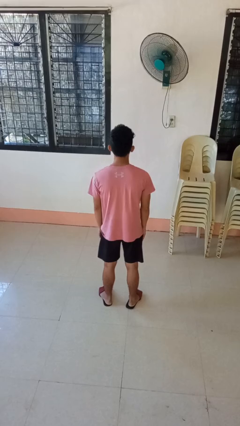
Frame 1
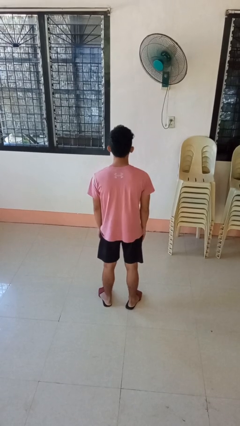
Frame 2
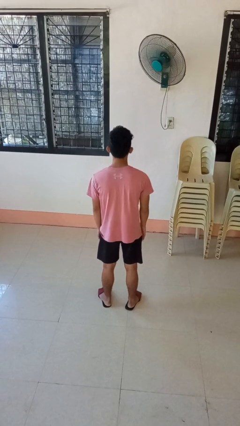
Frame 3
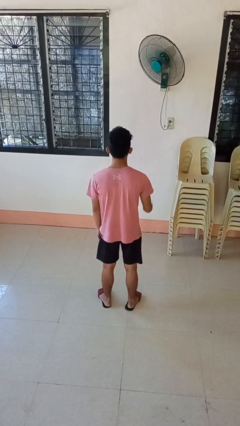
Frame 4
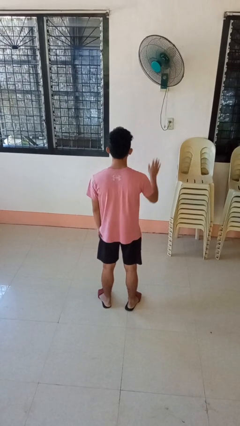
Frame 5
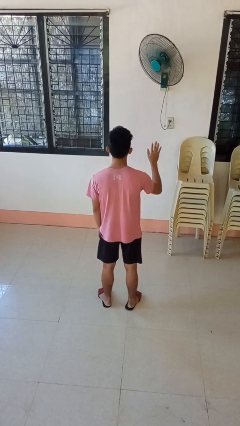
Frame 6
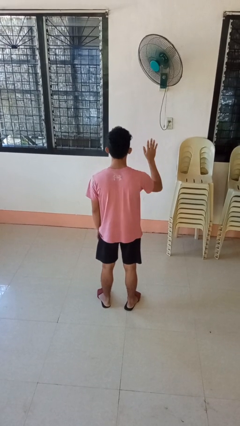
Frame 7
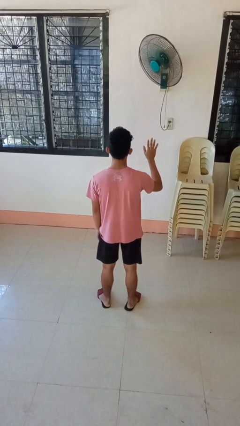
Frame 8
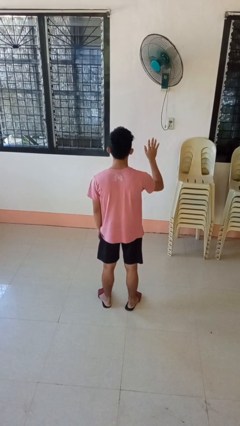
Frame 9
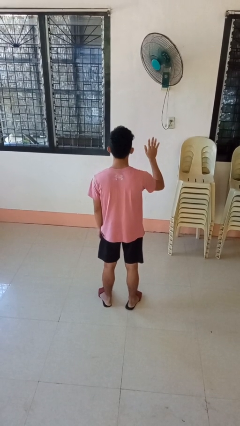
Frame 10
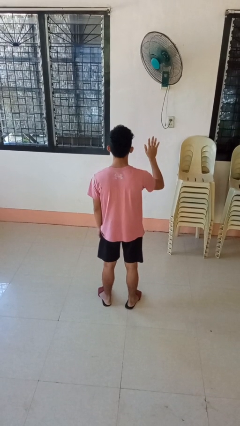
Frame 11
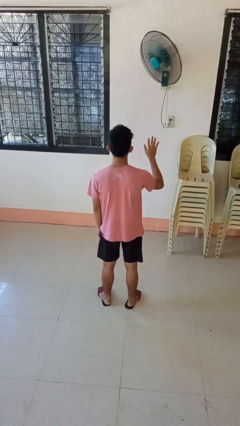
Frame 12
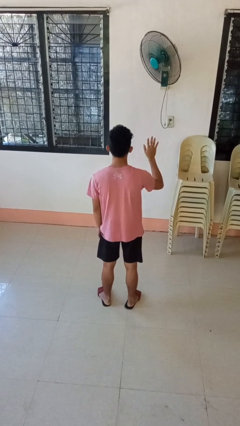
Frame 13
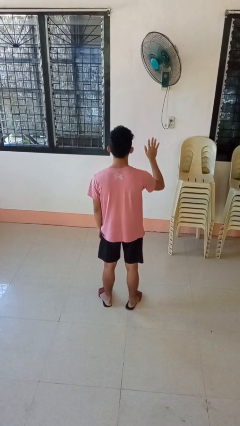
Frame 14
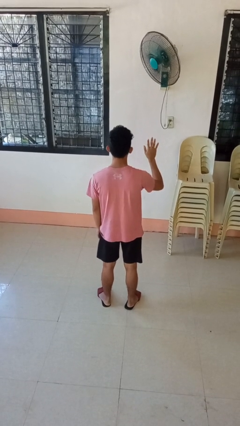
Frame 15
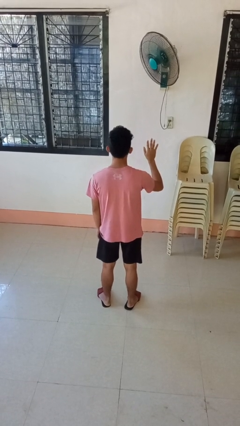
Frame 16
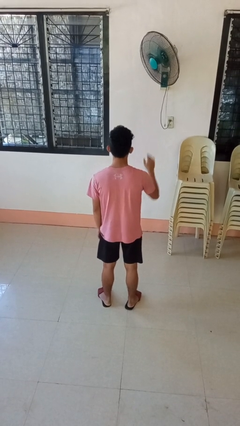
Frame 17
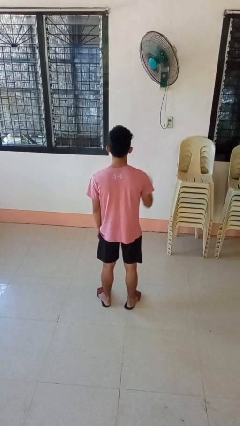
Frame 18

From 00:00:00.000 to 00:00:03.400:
person gestures number five

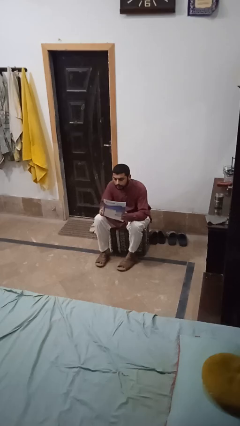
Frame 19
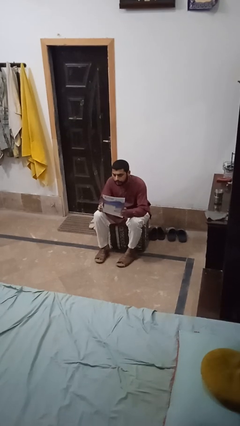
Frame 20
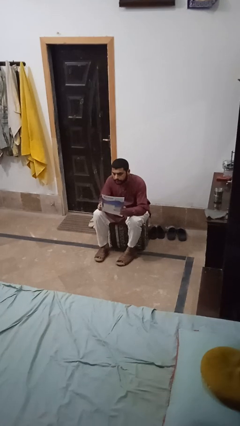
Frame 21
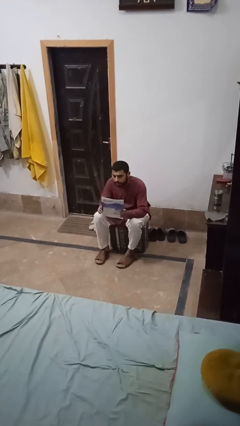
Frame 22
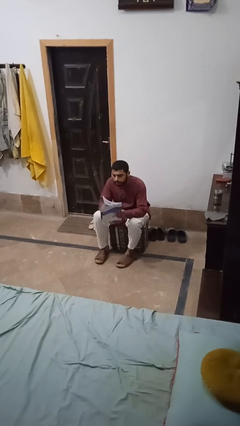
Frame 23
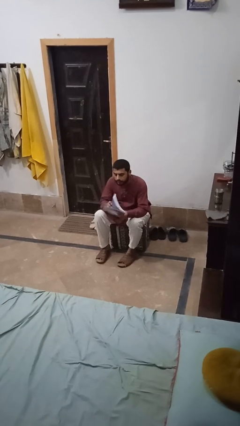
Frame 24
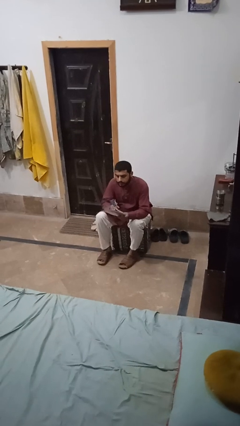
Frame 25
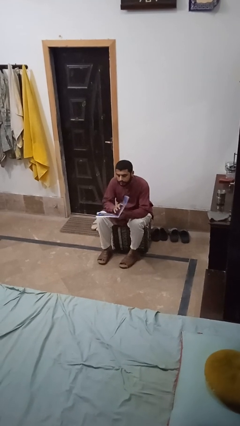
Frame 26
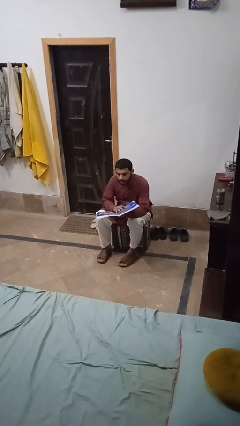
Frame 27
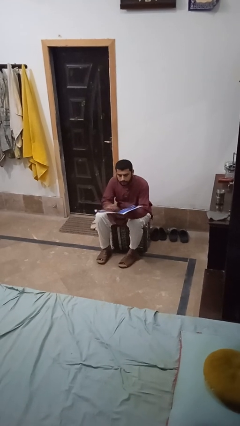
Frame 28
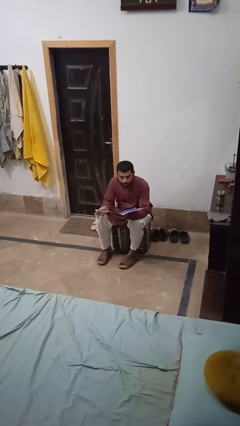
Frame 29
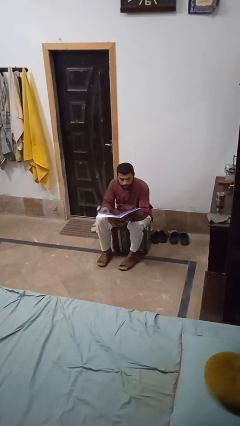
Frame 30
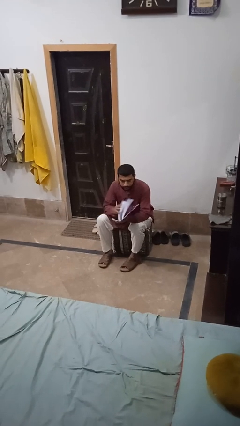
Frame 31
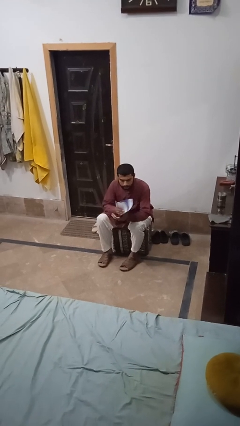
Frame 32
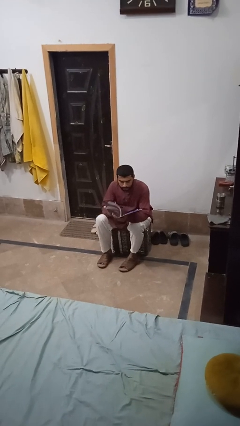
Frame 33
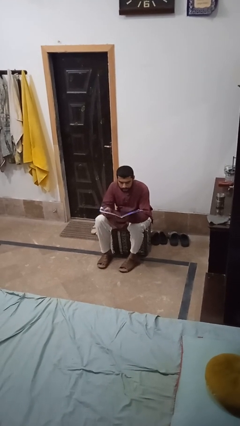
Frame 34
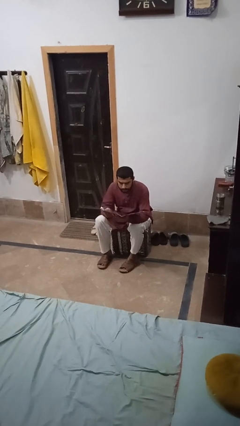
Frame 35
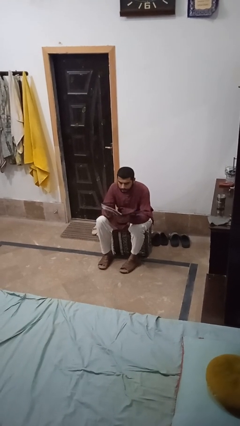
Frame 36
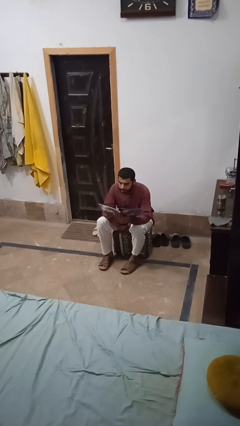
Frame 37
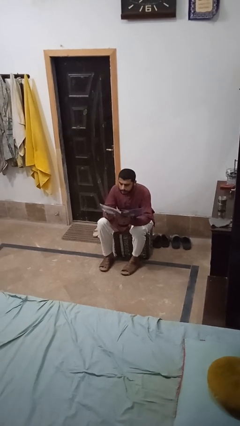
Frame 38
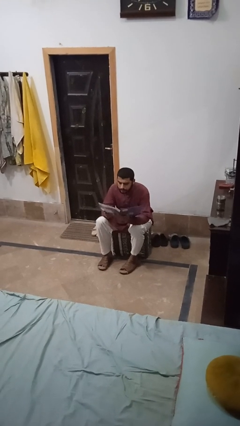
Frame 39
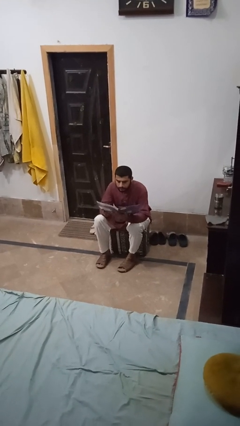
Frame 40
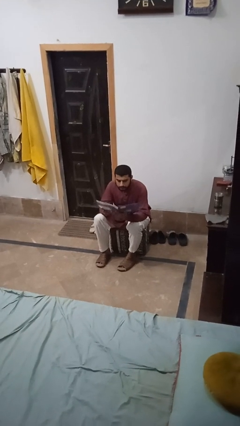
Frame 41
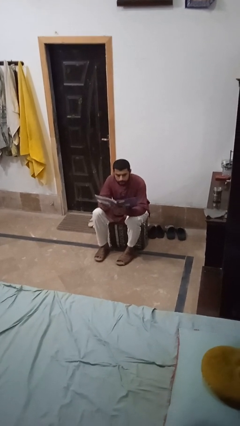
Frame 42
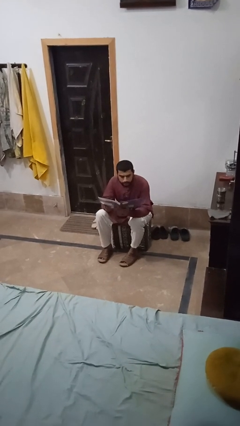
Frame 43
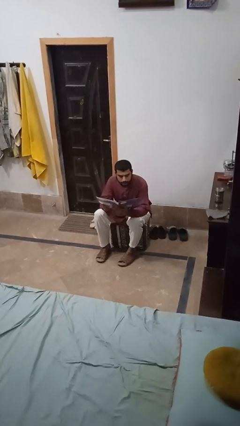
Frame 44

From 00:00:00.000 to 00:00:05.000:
person reads magazine

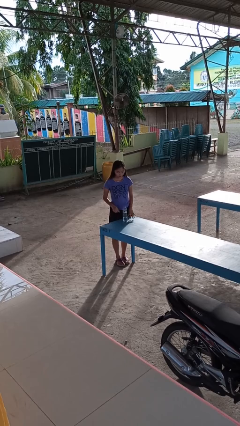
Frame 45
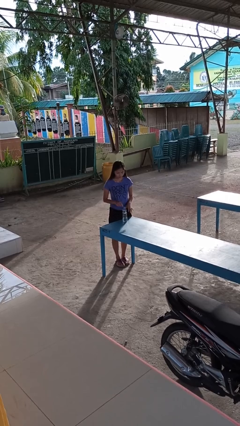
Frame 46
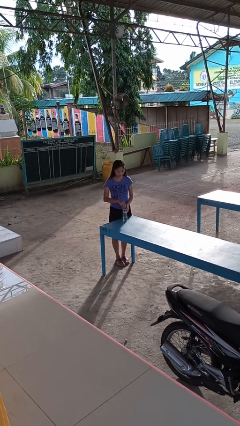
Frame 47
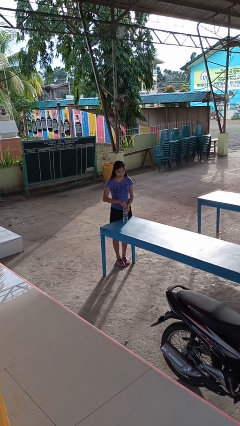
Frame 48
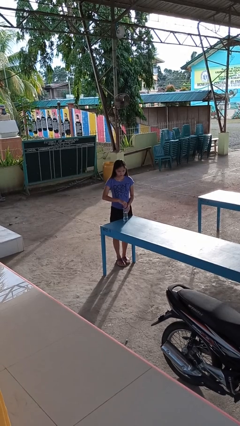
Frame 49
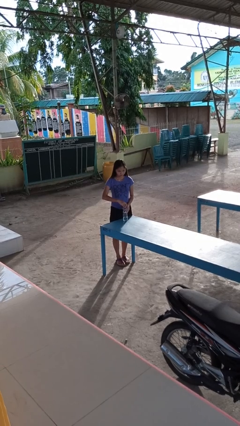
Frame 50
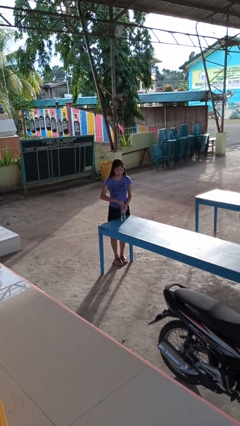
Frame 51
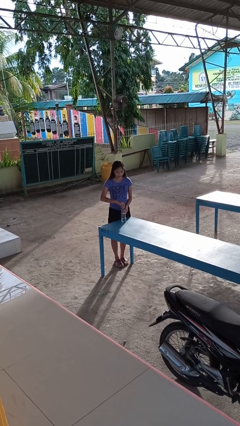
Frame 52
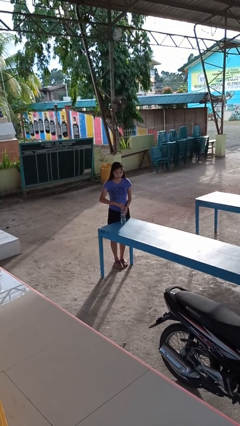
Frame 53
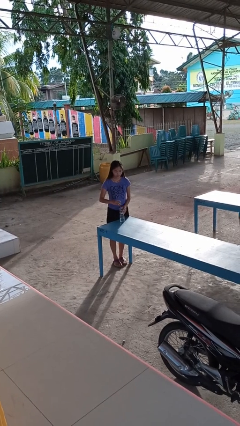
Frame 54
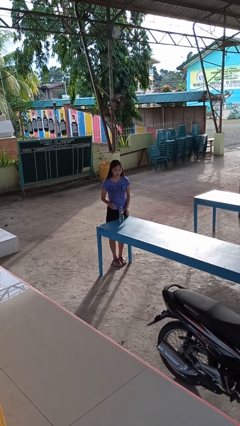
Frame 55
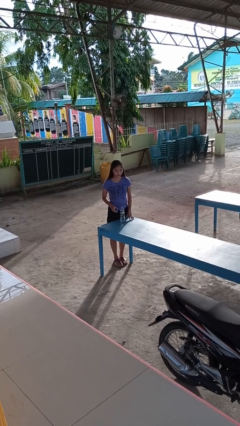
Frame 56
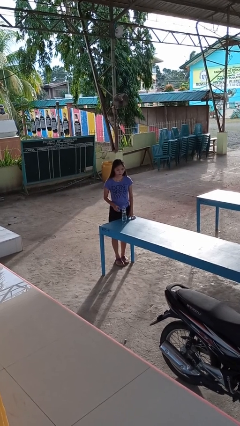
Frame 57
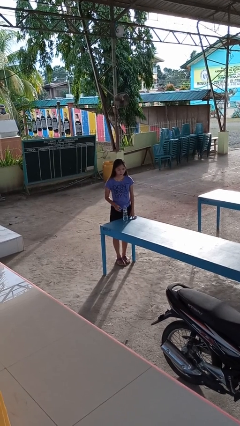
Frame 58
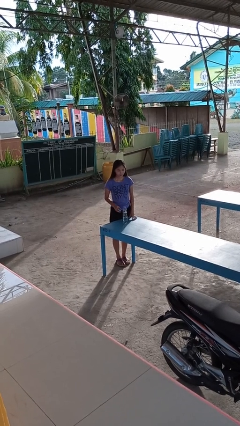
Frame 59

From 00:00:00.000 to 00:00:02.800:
person unscrews lid from bottle

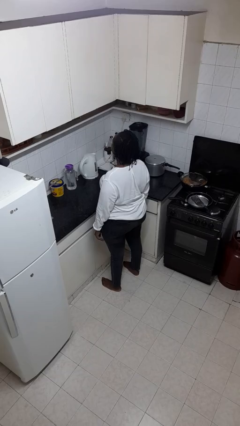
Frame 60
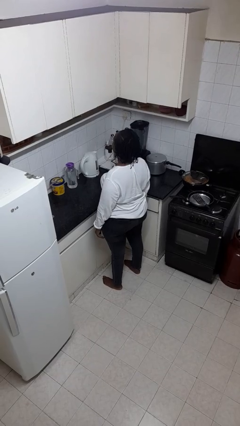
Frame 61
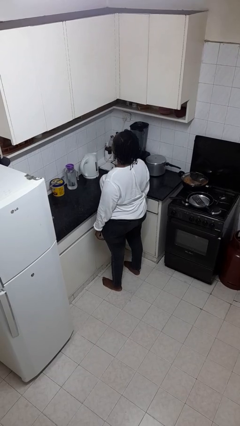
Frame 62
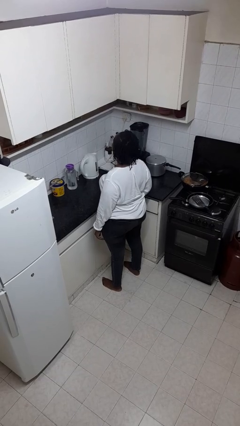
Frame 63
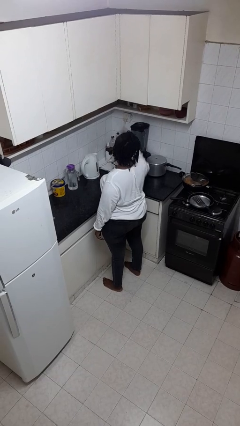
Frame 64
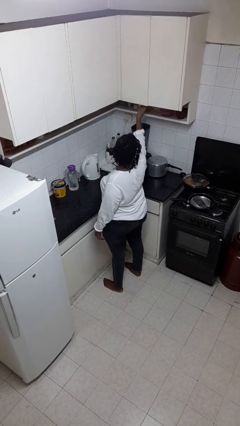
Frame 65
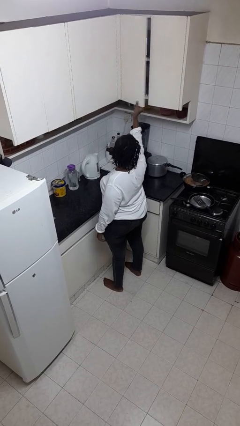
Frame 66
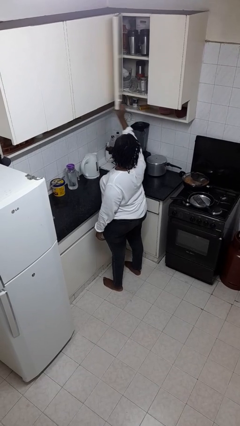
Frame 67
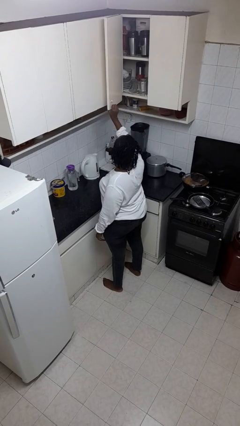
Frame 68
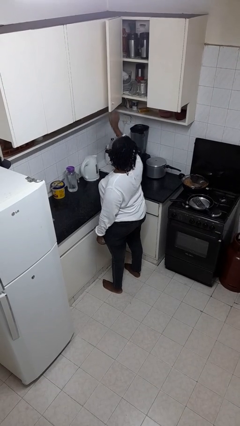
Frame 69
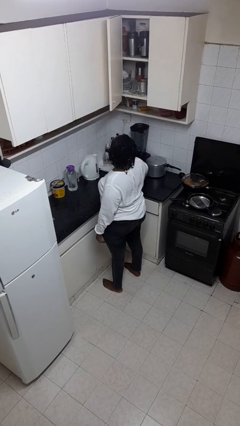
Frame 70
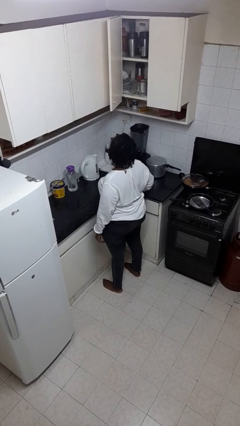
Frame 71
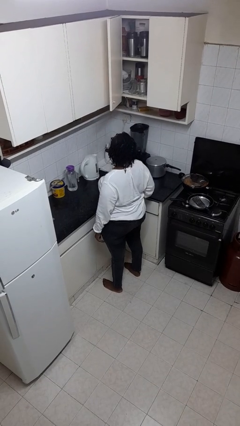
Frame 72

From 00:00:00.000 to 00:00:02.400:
person opens cabinet

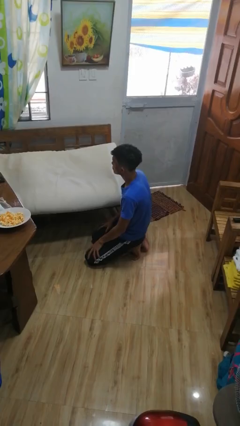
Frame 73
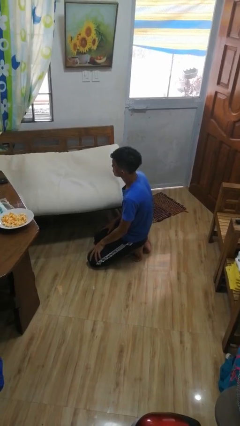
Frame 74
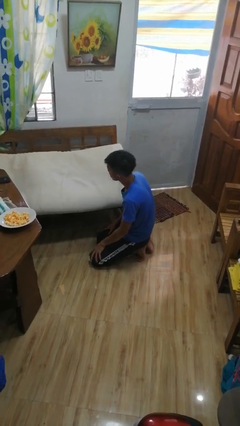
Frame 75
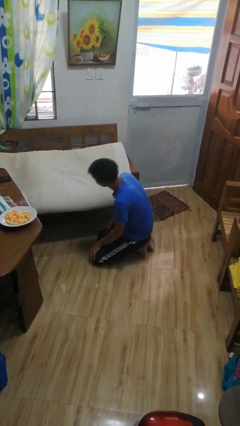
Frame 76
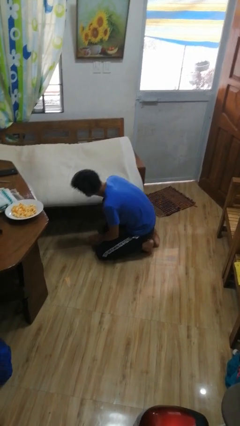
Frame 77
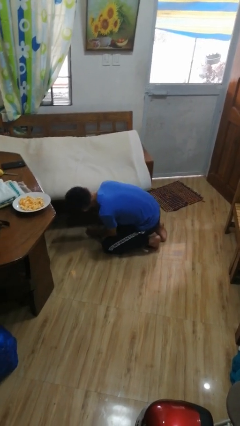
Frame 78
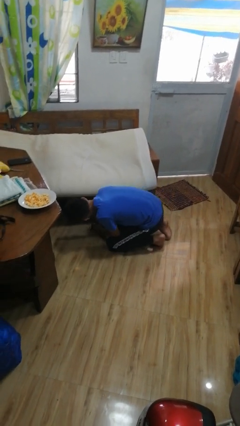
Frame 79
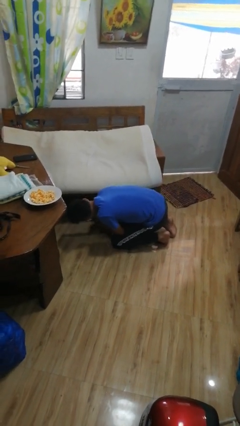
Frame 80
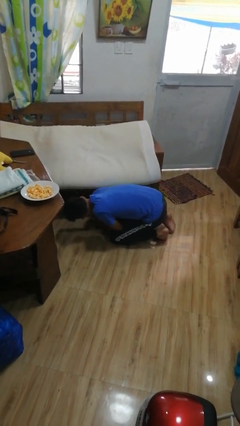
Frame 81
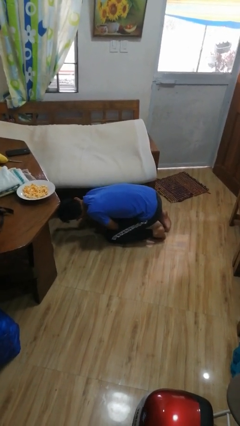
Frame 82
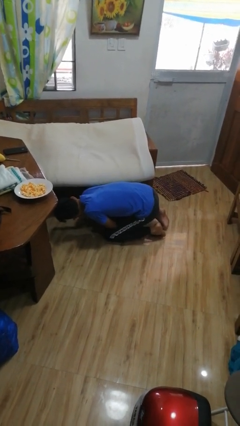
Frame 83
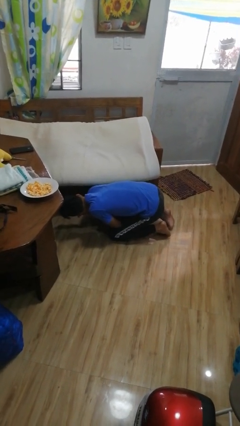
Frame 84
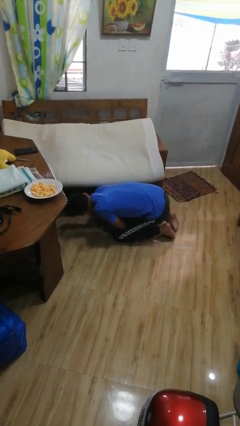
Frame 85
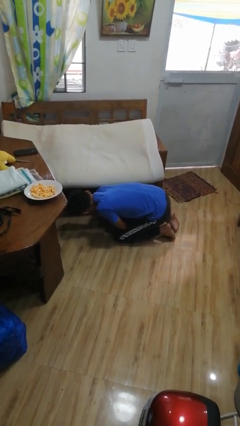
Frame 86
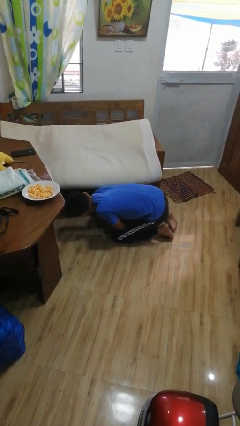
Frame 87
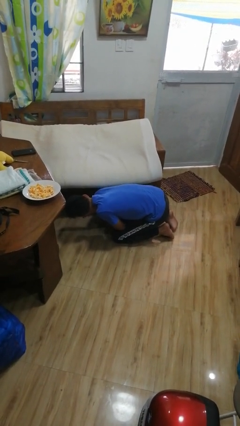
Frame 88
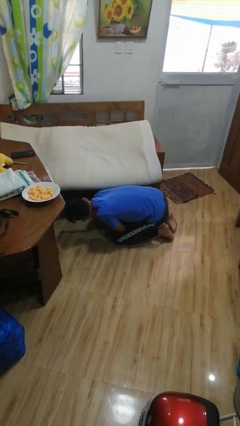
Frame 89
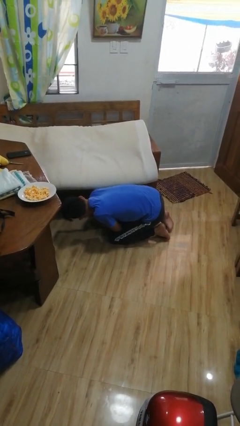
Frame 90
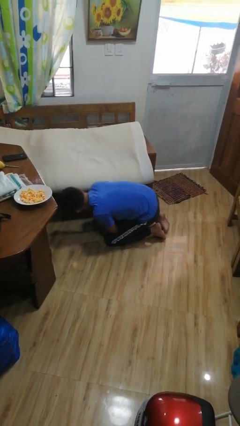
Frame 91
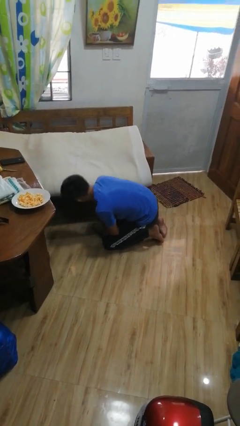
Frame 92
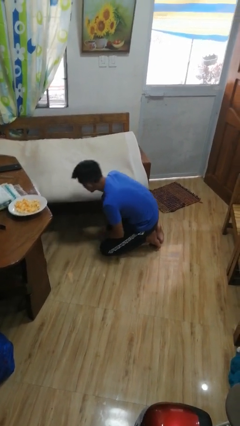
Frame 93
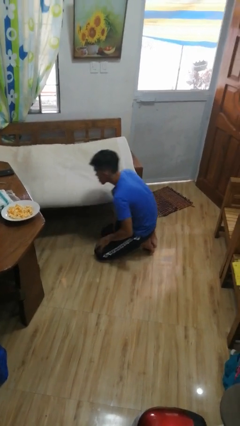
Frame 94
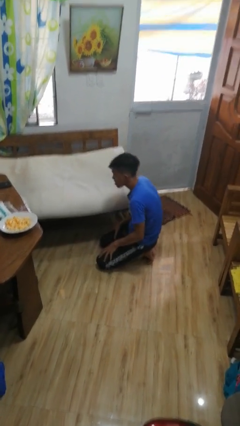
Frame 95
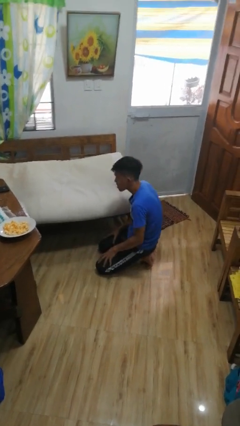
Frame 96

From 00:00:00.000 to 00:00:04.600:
person searches under couch
